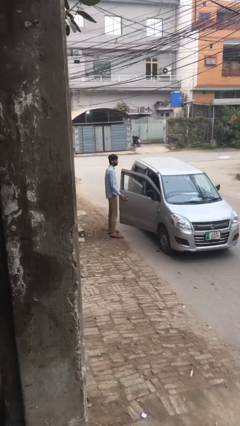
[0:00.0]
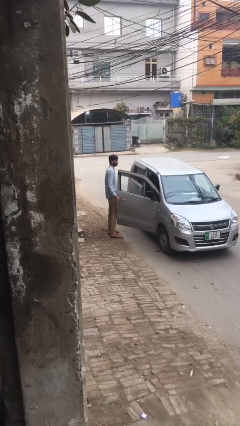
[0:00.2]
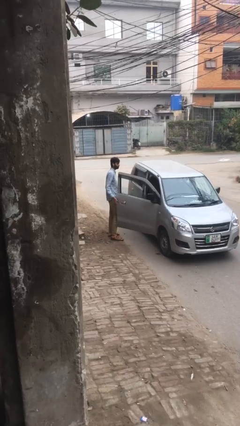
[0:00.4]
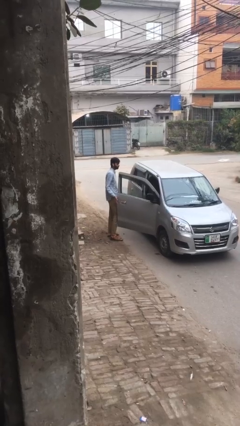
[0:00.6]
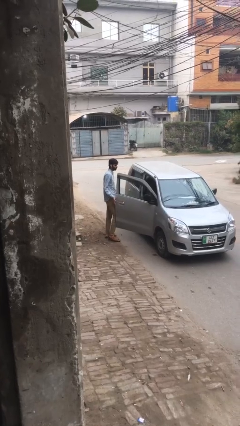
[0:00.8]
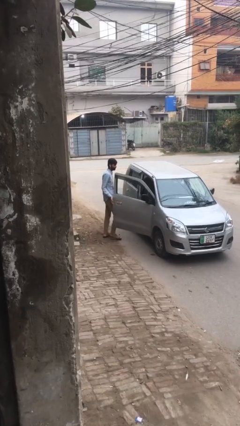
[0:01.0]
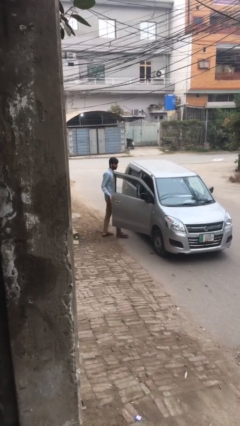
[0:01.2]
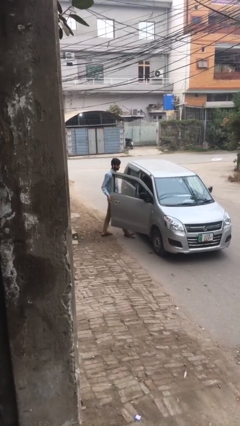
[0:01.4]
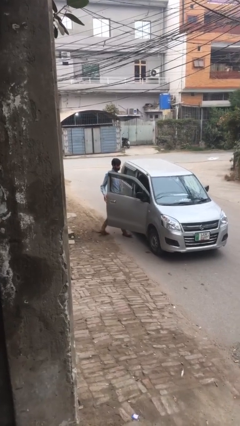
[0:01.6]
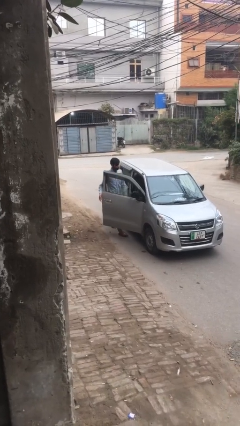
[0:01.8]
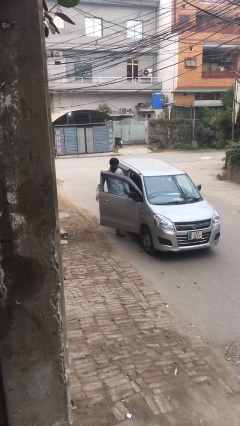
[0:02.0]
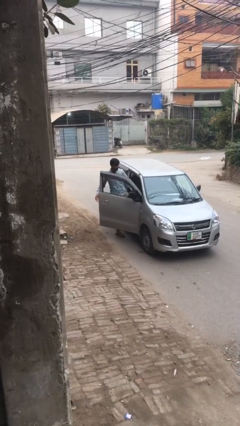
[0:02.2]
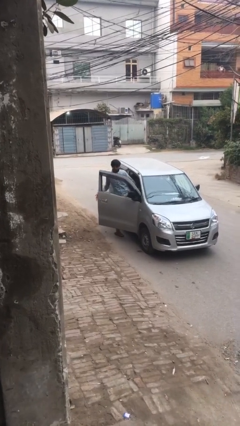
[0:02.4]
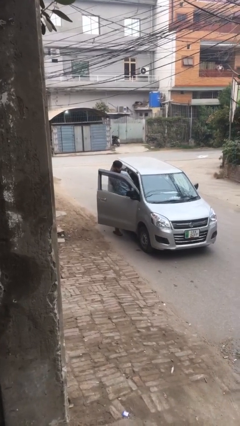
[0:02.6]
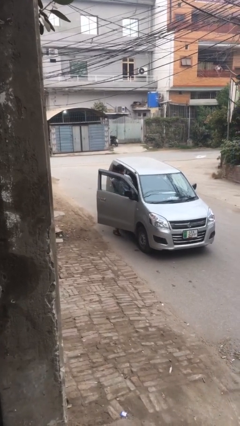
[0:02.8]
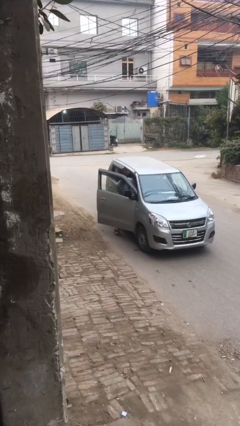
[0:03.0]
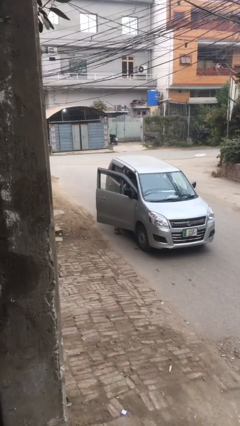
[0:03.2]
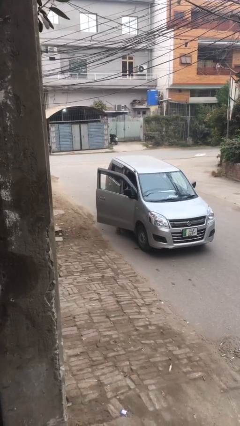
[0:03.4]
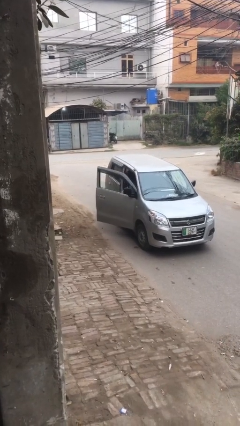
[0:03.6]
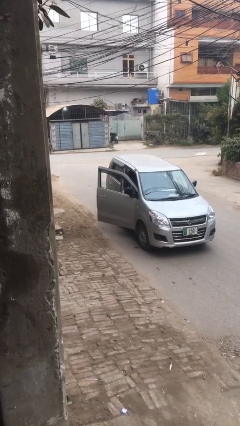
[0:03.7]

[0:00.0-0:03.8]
person enters car

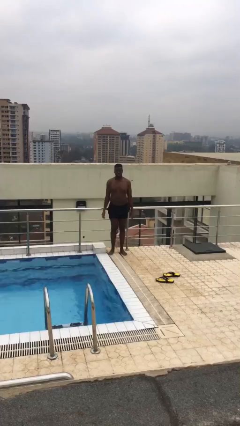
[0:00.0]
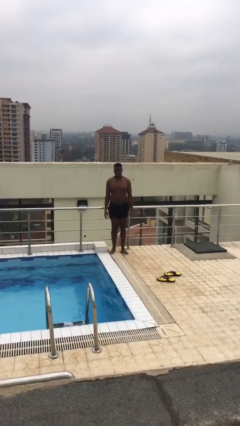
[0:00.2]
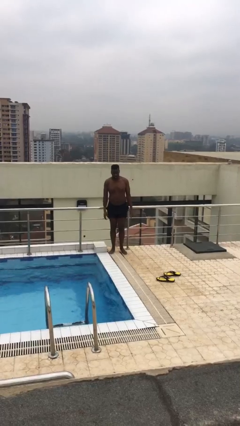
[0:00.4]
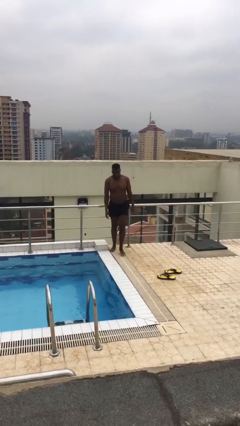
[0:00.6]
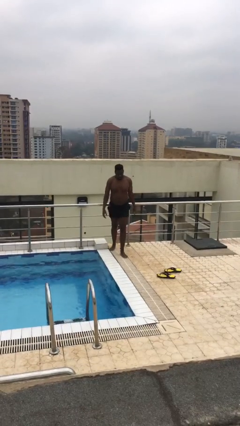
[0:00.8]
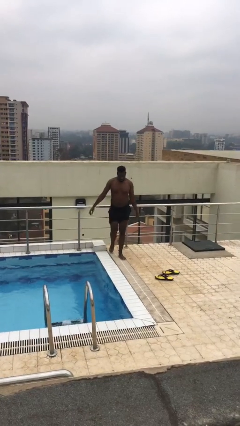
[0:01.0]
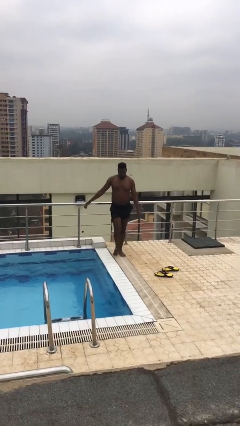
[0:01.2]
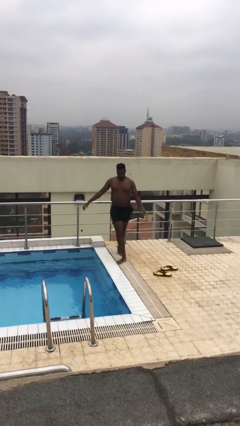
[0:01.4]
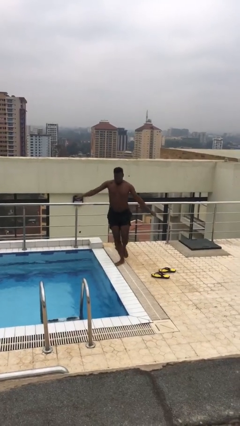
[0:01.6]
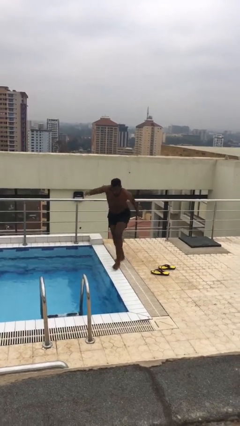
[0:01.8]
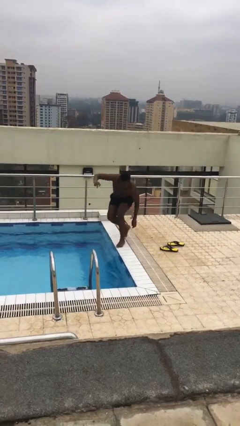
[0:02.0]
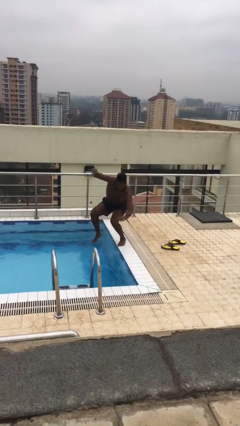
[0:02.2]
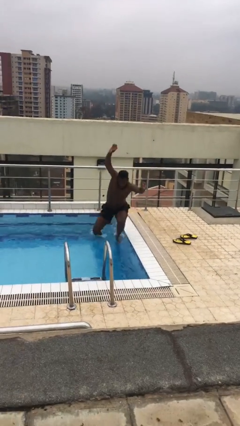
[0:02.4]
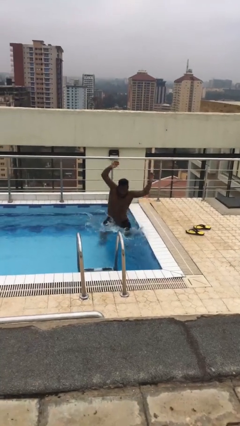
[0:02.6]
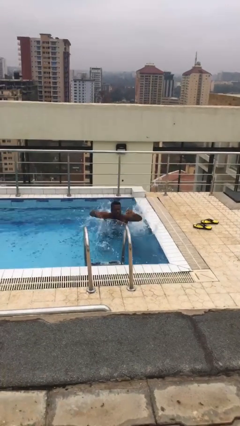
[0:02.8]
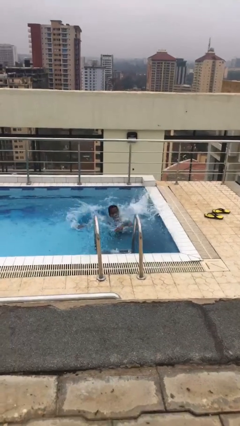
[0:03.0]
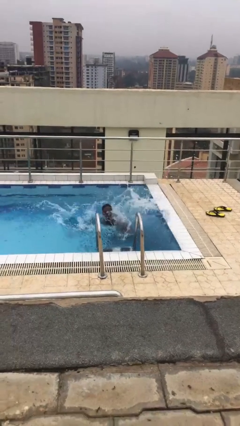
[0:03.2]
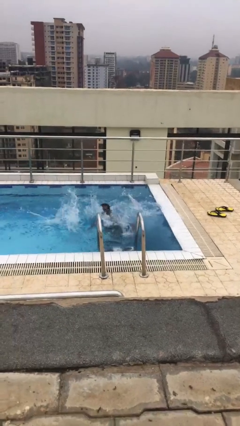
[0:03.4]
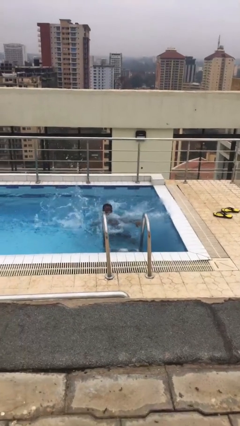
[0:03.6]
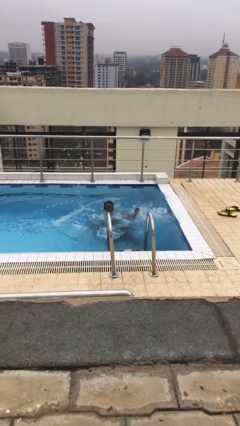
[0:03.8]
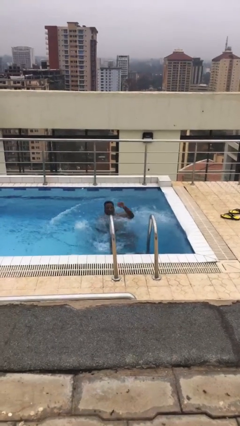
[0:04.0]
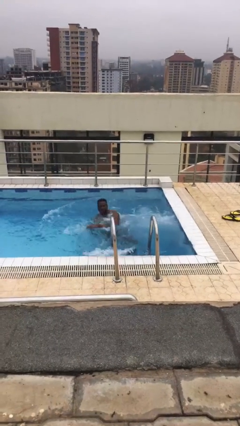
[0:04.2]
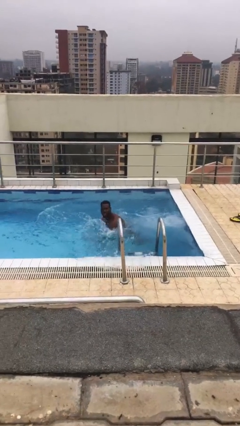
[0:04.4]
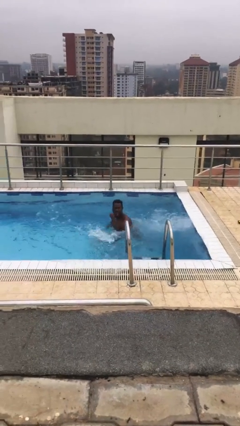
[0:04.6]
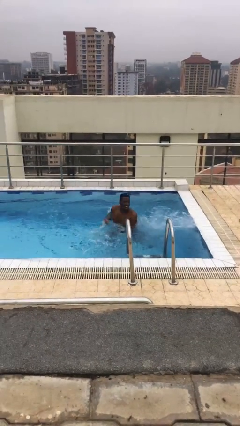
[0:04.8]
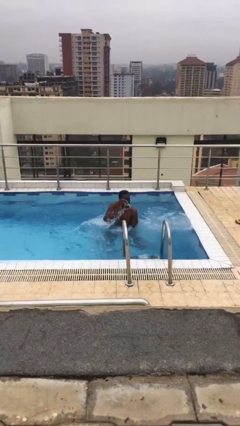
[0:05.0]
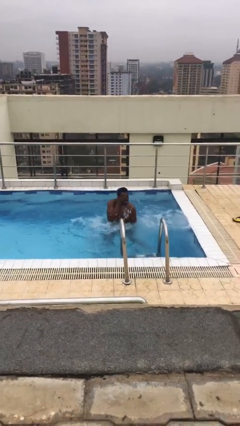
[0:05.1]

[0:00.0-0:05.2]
person falls into pool

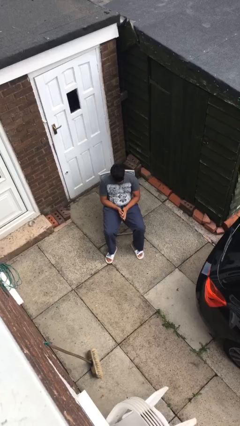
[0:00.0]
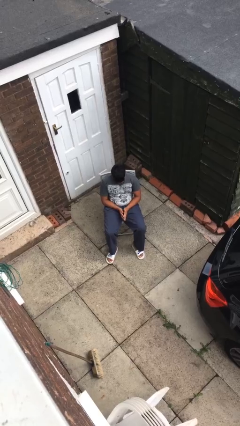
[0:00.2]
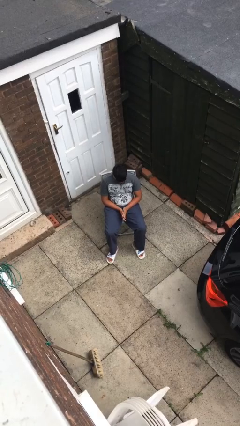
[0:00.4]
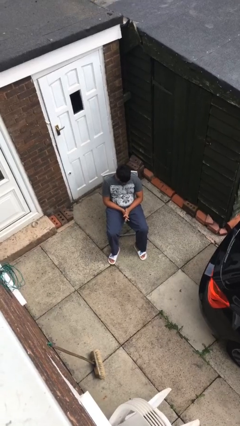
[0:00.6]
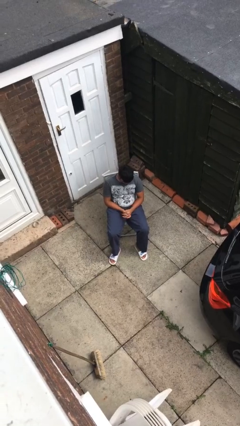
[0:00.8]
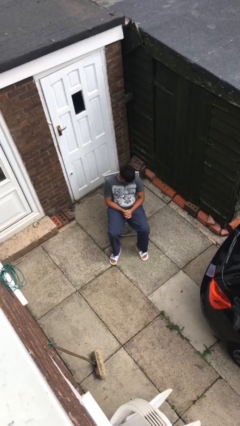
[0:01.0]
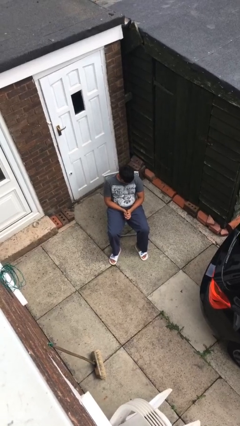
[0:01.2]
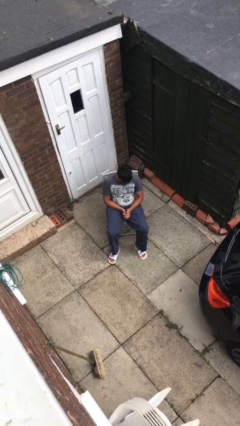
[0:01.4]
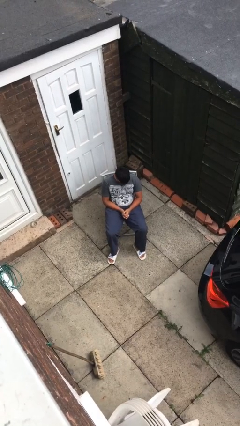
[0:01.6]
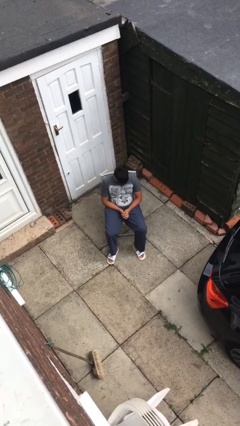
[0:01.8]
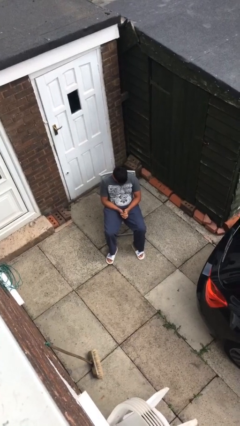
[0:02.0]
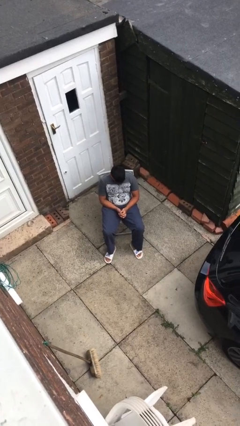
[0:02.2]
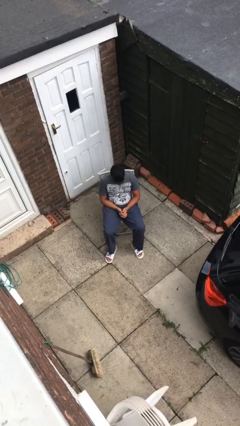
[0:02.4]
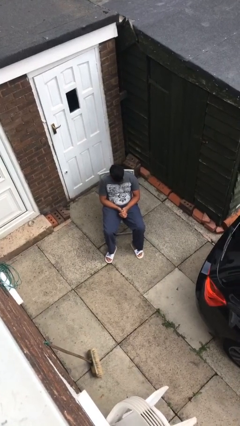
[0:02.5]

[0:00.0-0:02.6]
person looks at hands in lap

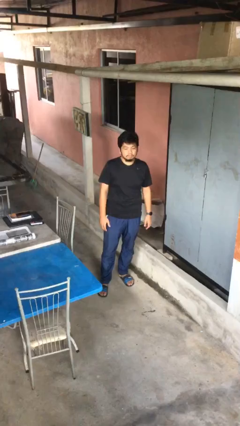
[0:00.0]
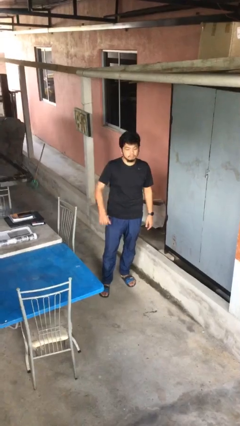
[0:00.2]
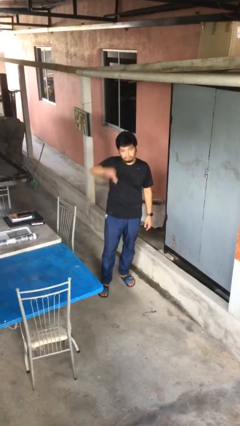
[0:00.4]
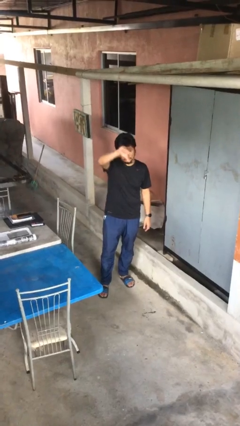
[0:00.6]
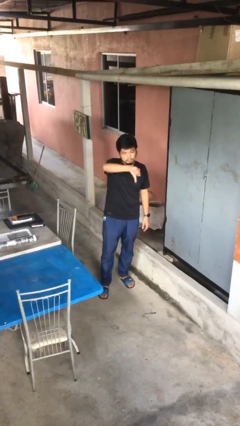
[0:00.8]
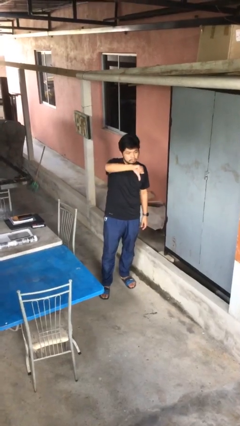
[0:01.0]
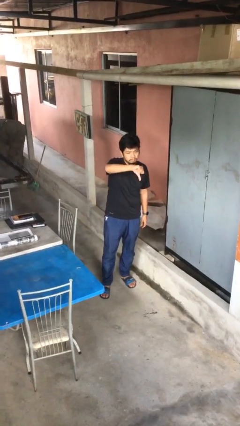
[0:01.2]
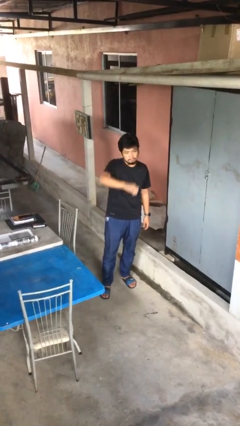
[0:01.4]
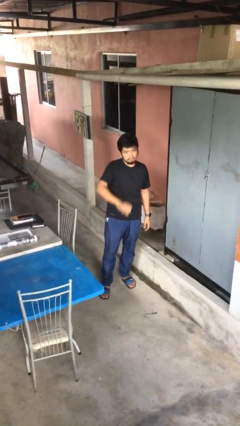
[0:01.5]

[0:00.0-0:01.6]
person gestures thumbs down

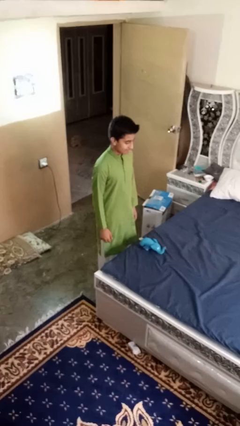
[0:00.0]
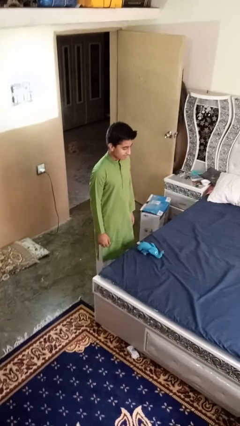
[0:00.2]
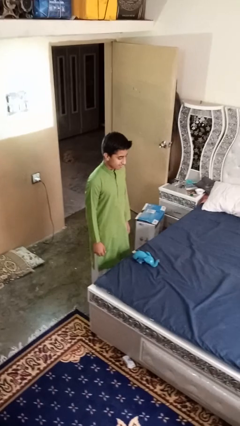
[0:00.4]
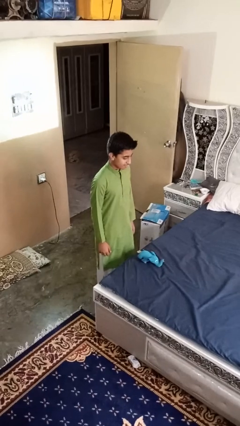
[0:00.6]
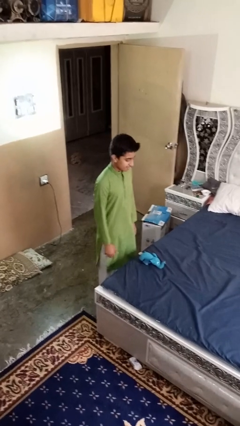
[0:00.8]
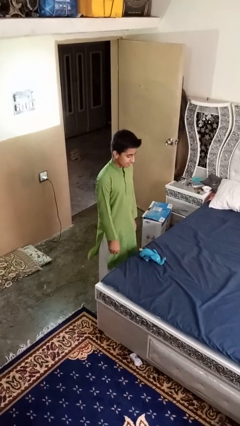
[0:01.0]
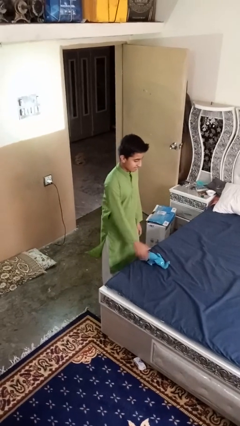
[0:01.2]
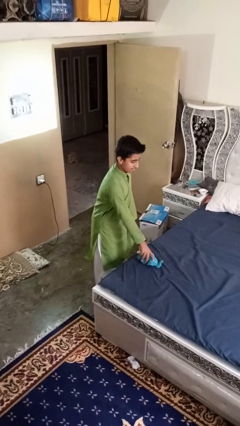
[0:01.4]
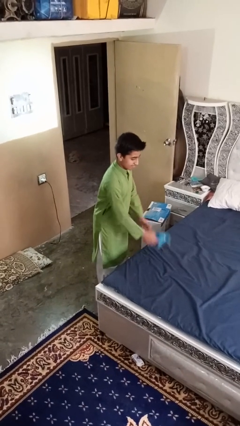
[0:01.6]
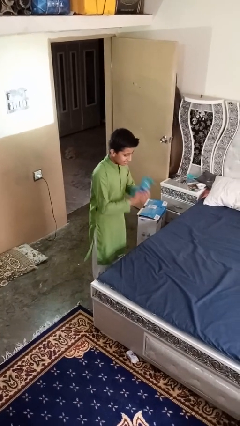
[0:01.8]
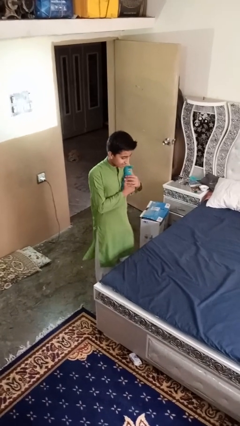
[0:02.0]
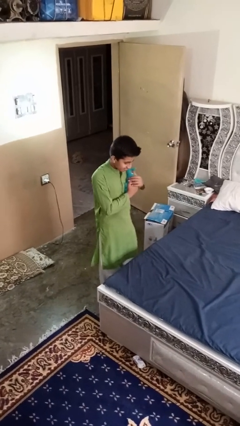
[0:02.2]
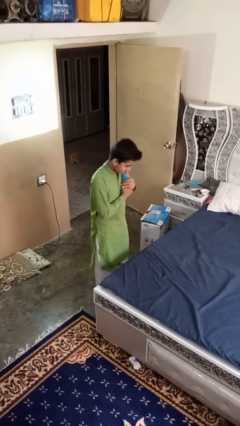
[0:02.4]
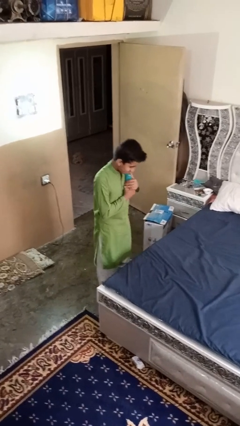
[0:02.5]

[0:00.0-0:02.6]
person hugs stuffed animal

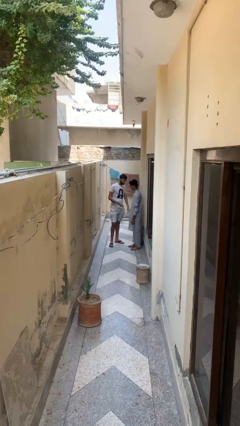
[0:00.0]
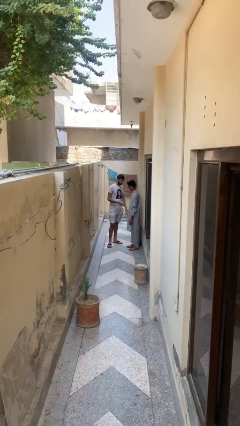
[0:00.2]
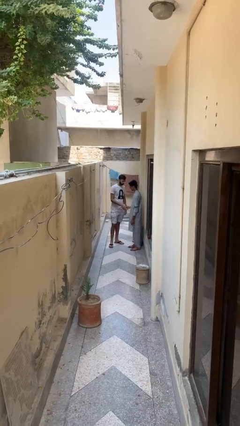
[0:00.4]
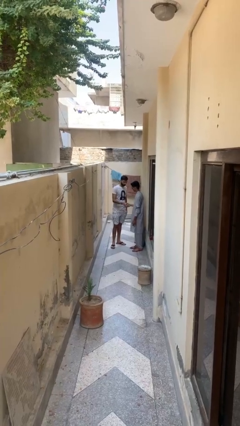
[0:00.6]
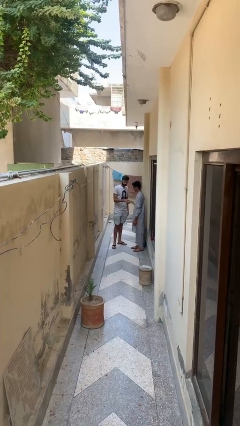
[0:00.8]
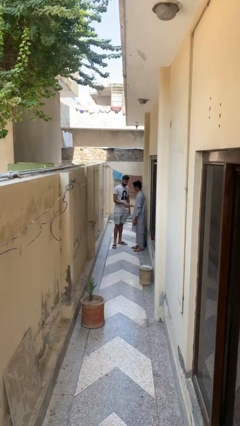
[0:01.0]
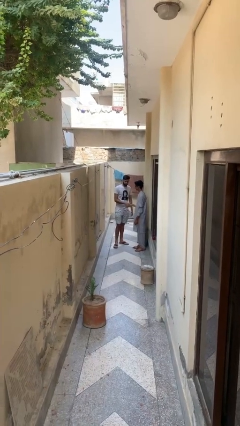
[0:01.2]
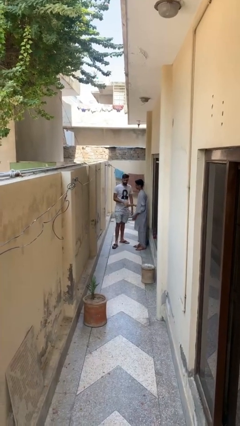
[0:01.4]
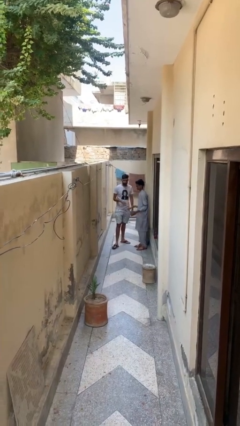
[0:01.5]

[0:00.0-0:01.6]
person shakes hand
